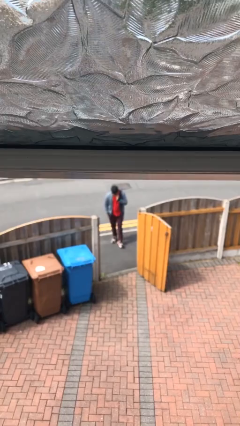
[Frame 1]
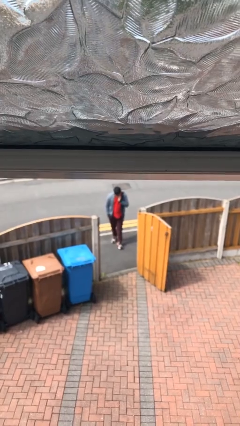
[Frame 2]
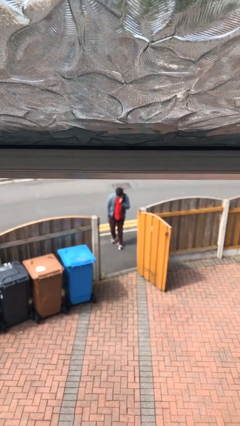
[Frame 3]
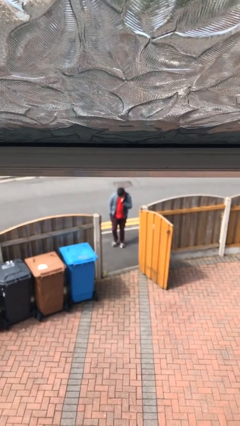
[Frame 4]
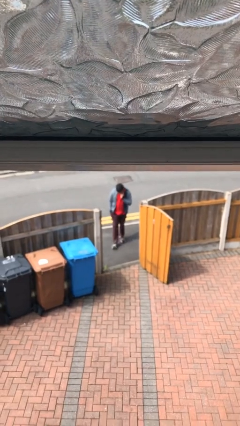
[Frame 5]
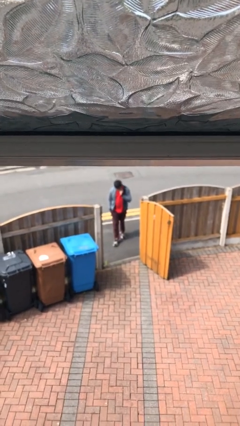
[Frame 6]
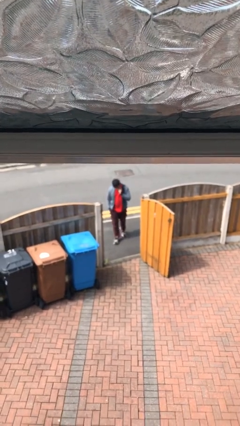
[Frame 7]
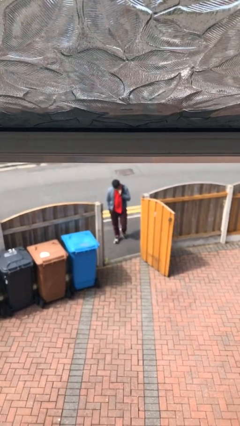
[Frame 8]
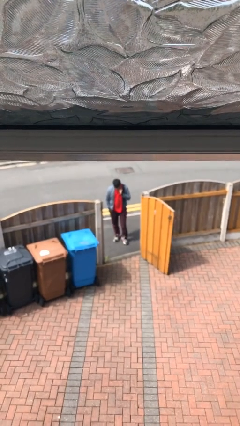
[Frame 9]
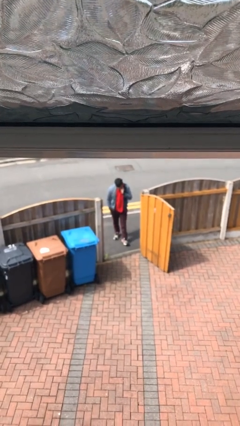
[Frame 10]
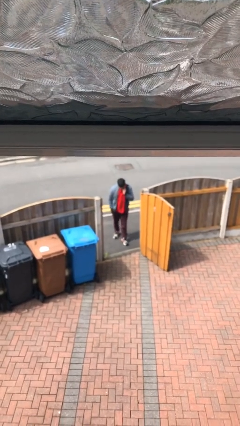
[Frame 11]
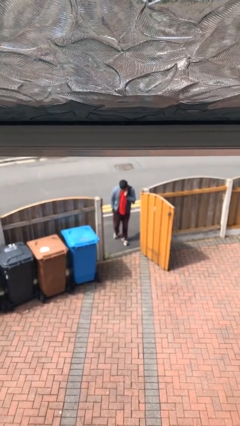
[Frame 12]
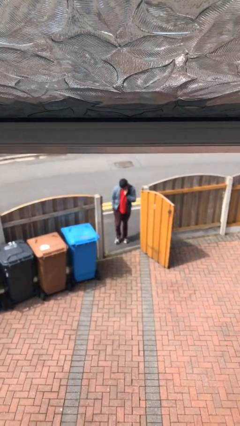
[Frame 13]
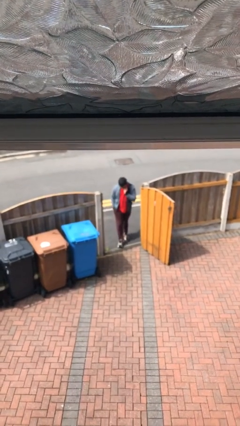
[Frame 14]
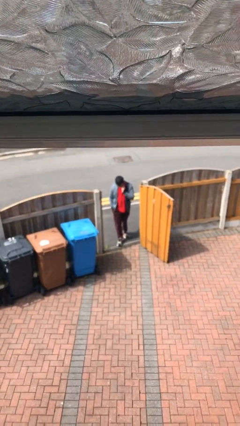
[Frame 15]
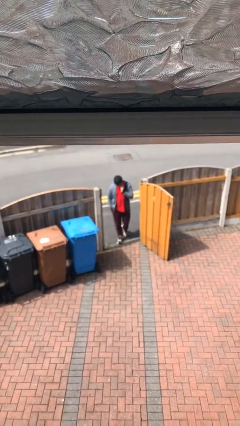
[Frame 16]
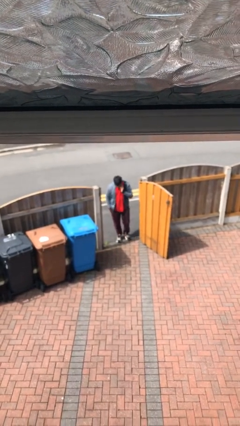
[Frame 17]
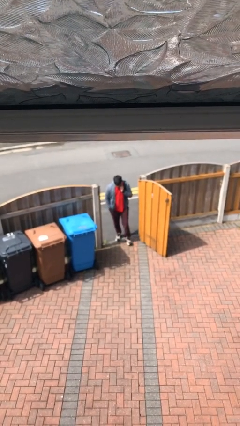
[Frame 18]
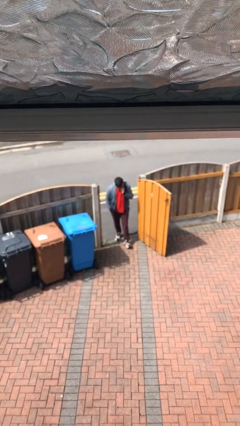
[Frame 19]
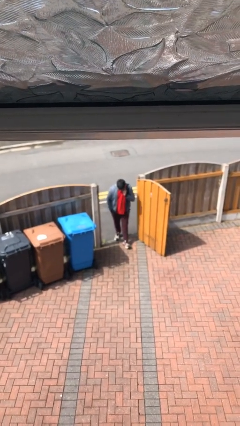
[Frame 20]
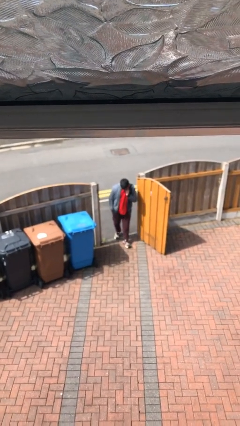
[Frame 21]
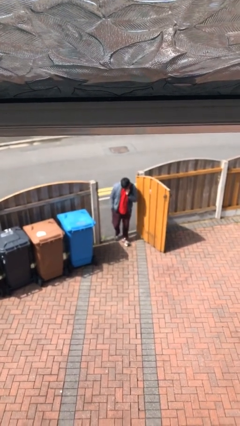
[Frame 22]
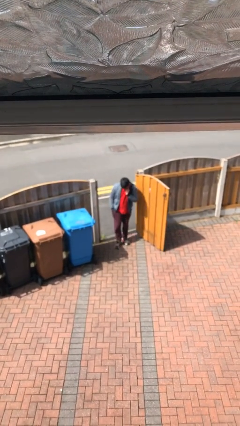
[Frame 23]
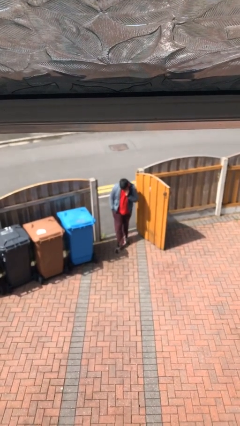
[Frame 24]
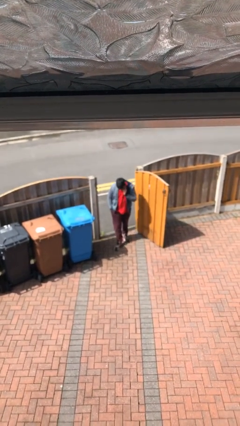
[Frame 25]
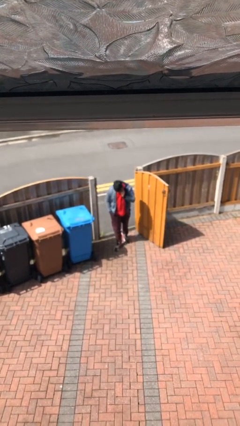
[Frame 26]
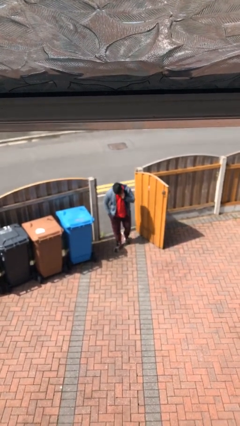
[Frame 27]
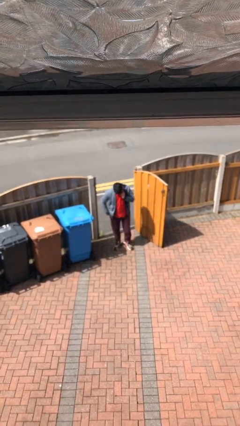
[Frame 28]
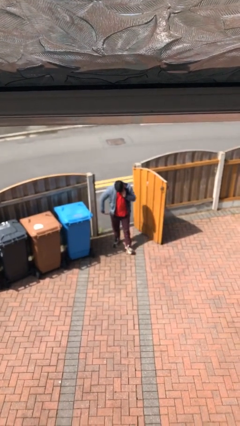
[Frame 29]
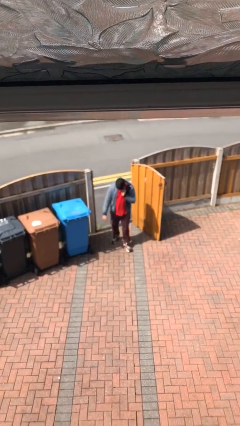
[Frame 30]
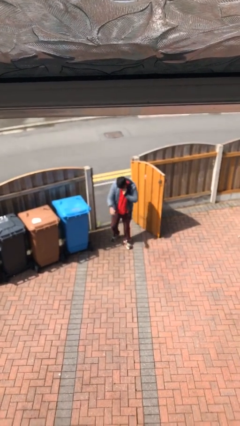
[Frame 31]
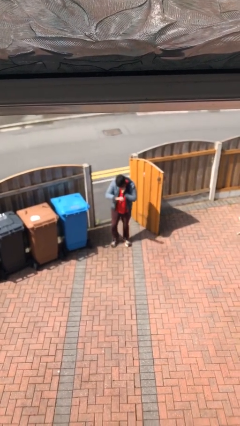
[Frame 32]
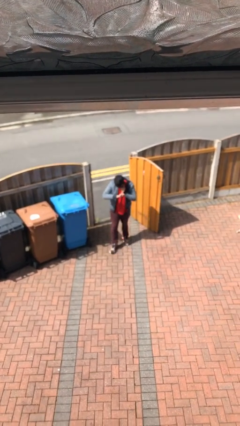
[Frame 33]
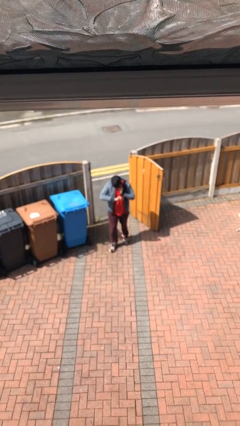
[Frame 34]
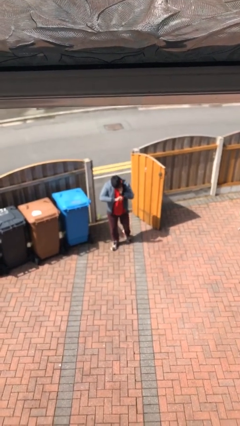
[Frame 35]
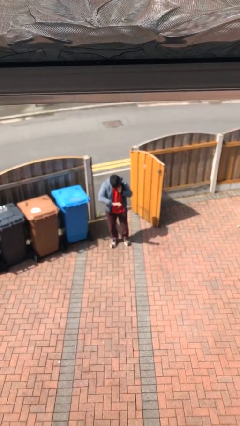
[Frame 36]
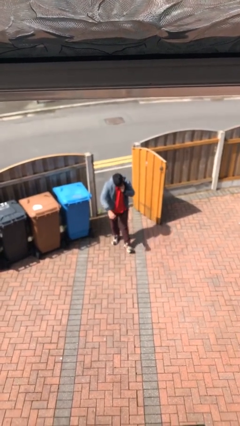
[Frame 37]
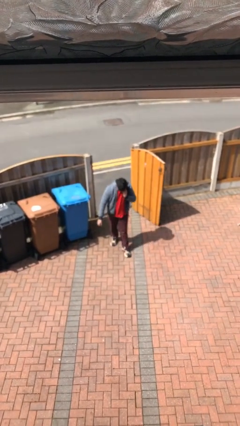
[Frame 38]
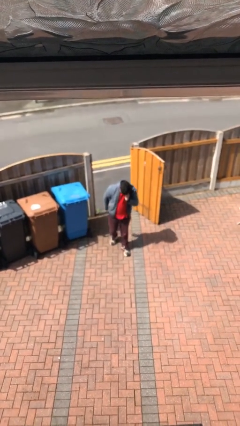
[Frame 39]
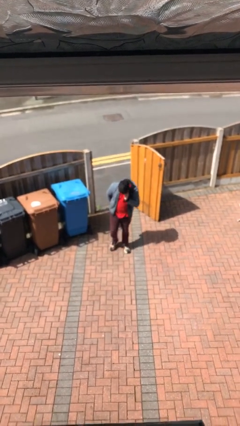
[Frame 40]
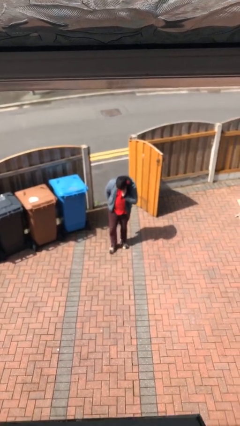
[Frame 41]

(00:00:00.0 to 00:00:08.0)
person enters scene through structure

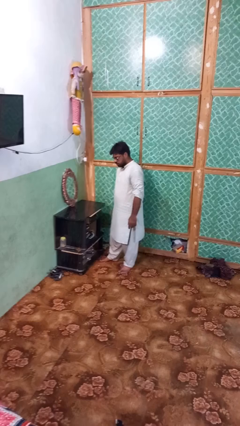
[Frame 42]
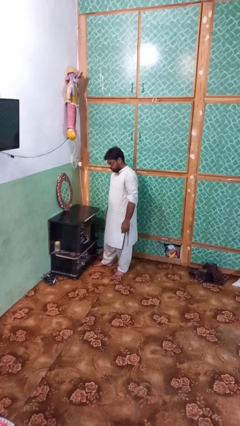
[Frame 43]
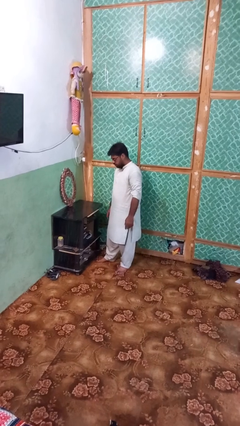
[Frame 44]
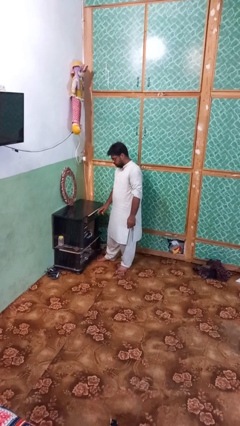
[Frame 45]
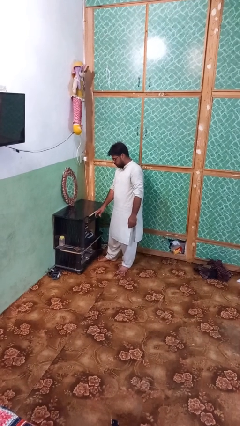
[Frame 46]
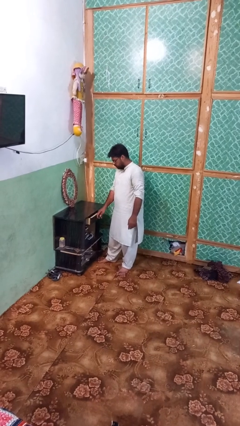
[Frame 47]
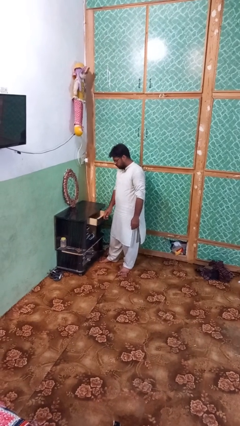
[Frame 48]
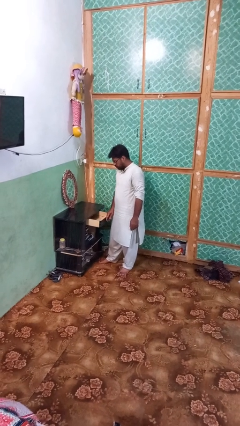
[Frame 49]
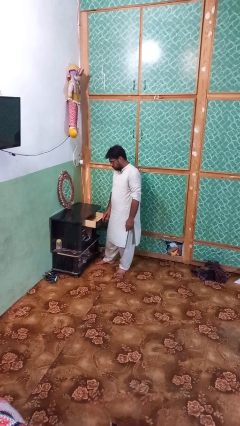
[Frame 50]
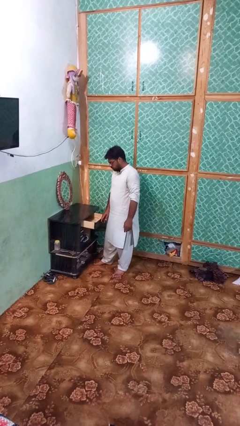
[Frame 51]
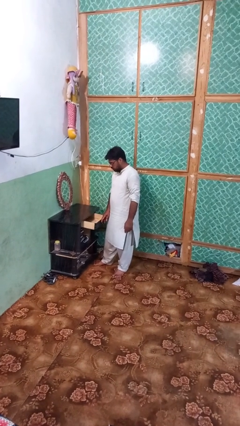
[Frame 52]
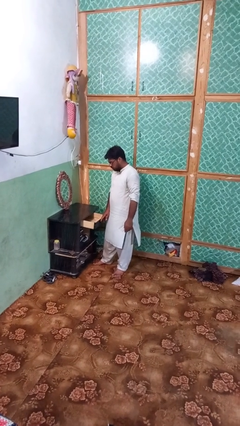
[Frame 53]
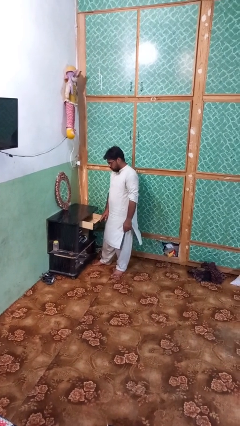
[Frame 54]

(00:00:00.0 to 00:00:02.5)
person opens dresser drawer

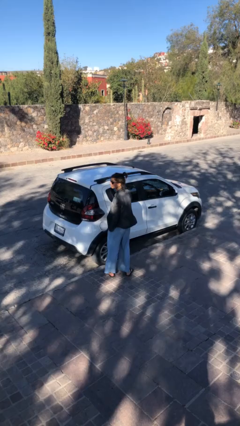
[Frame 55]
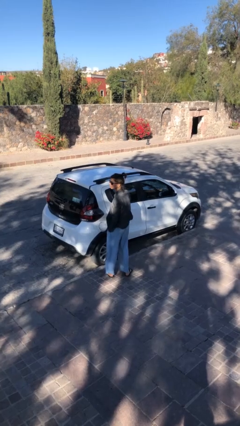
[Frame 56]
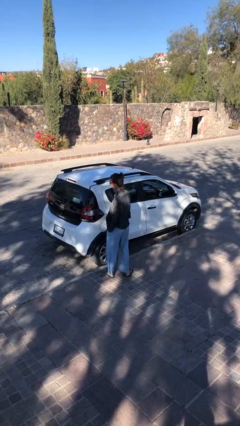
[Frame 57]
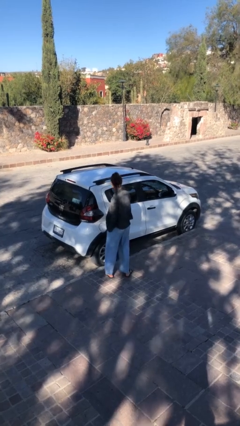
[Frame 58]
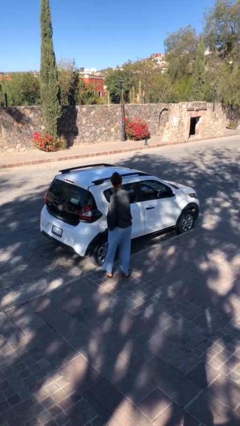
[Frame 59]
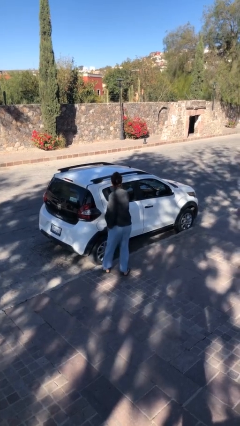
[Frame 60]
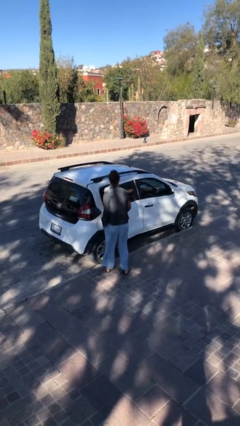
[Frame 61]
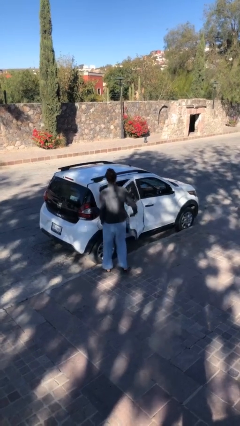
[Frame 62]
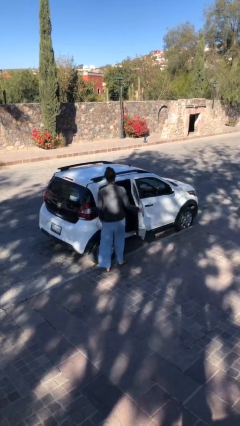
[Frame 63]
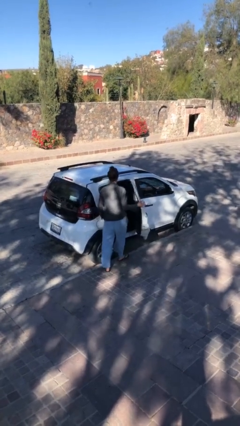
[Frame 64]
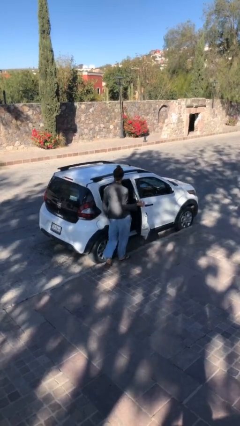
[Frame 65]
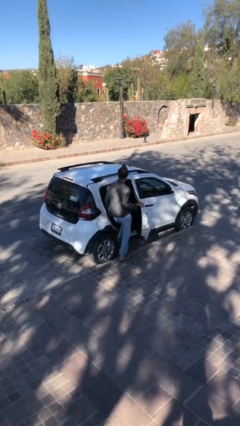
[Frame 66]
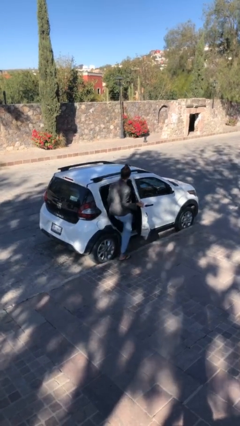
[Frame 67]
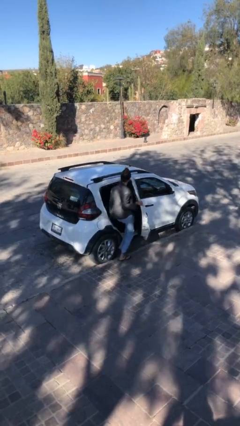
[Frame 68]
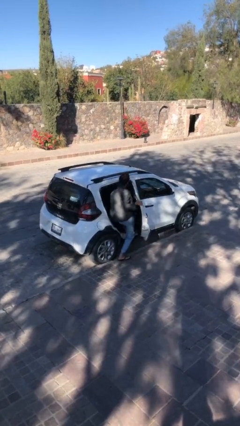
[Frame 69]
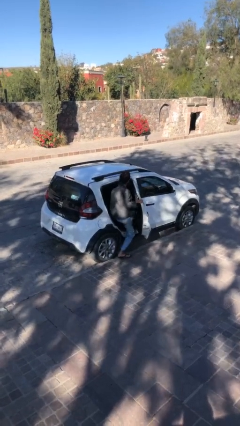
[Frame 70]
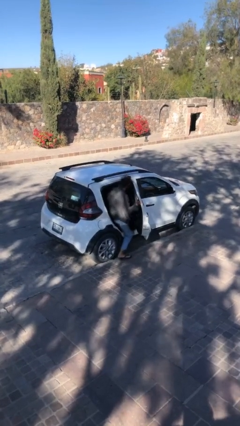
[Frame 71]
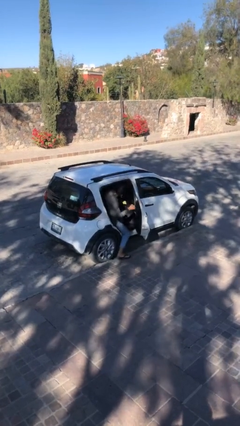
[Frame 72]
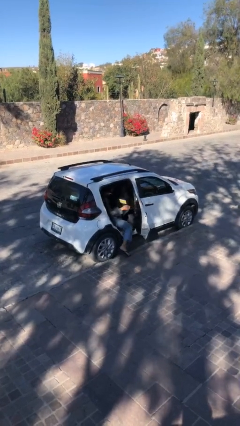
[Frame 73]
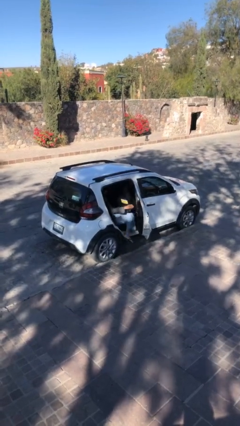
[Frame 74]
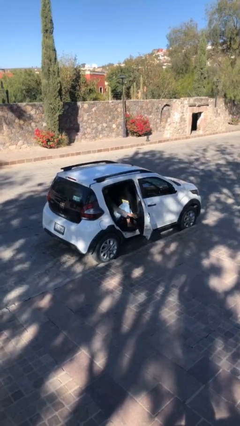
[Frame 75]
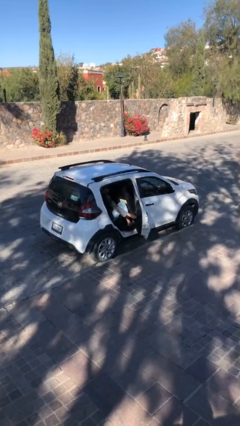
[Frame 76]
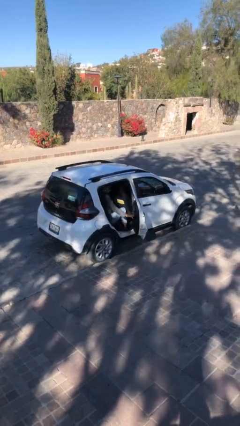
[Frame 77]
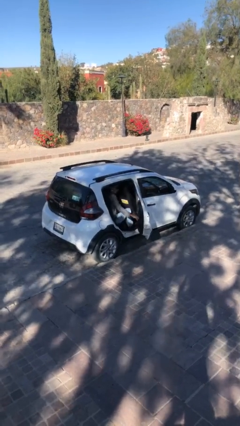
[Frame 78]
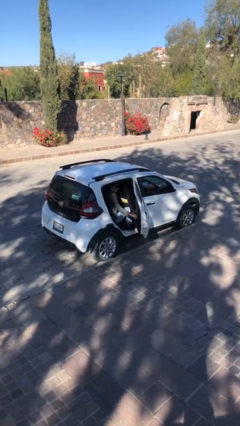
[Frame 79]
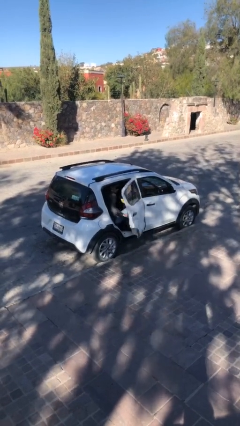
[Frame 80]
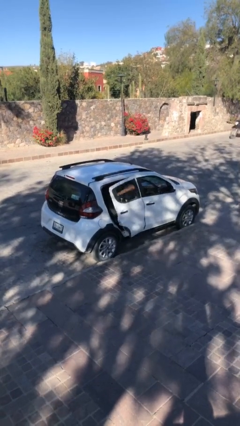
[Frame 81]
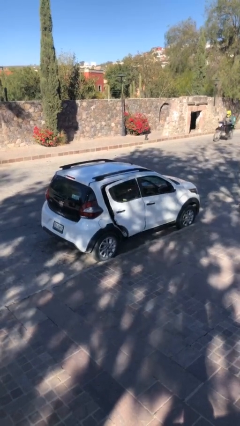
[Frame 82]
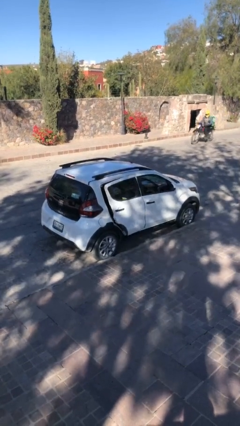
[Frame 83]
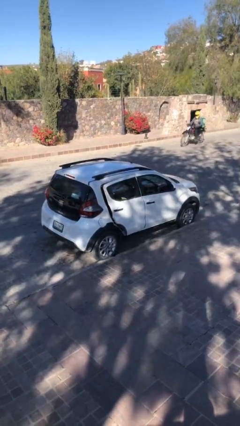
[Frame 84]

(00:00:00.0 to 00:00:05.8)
car picks up person

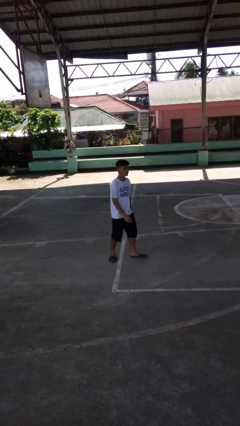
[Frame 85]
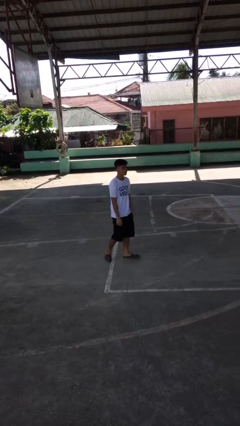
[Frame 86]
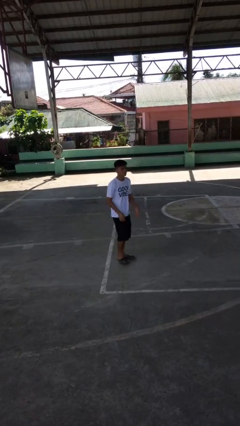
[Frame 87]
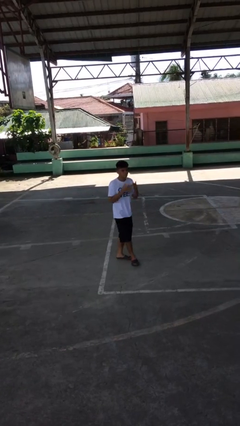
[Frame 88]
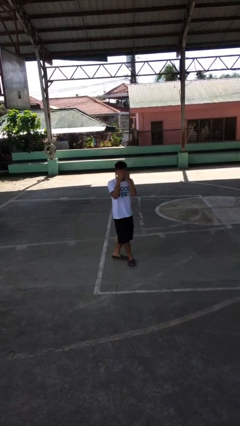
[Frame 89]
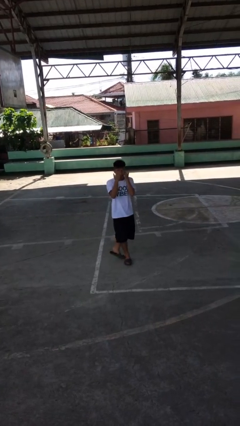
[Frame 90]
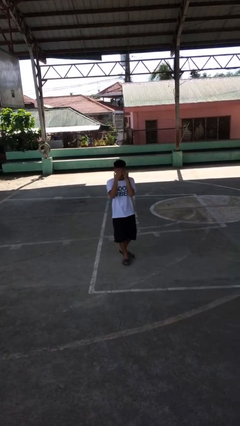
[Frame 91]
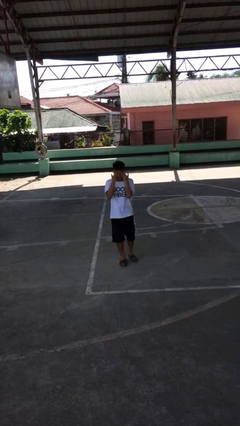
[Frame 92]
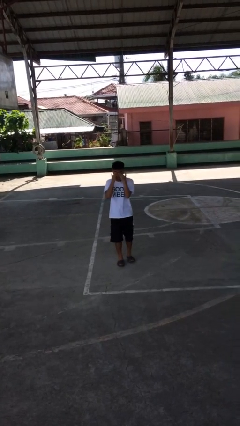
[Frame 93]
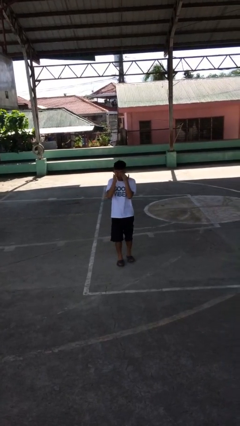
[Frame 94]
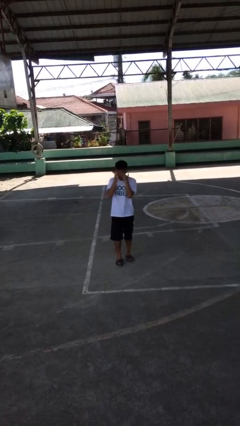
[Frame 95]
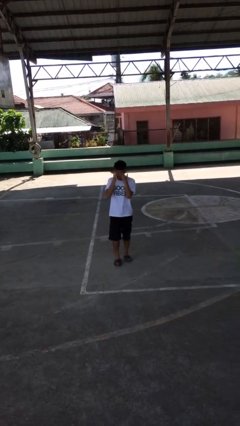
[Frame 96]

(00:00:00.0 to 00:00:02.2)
person rubs eyes
